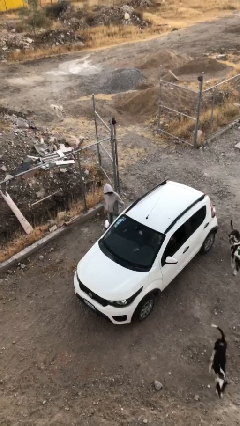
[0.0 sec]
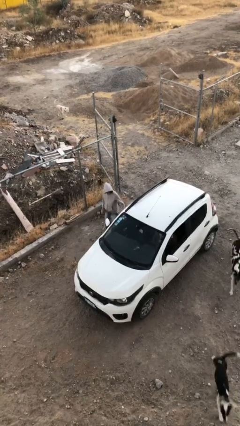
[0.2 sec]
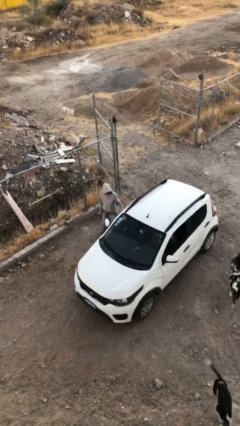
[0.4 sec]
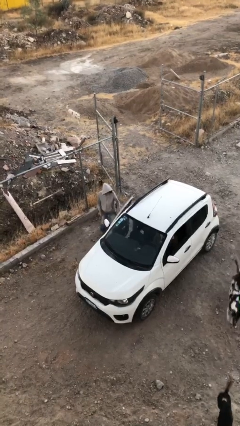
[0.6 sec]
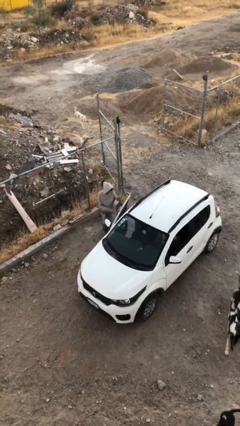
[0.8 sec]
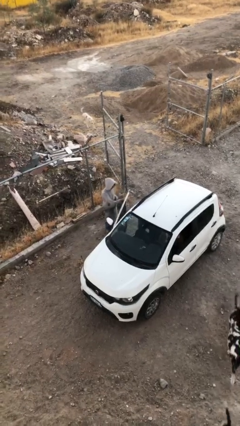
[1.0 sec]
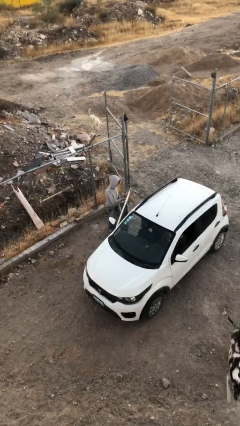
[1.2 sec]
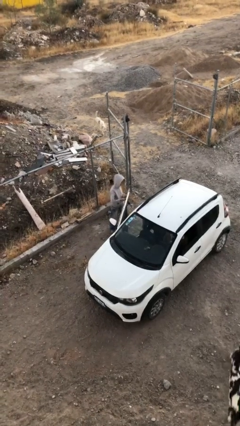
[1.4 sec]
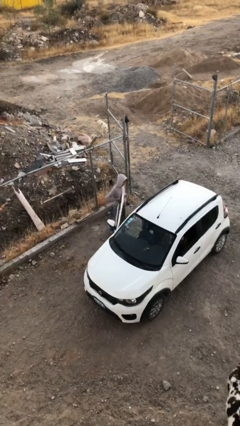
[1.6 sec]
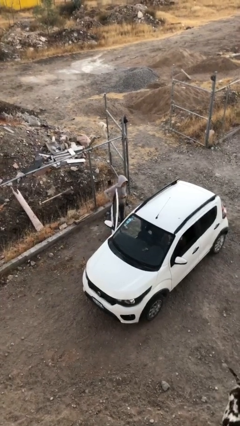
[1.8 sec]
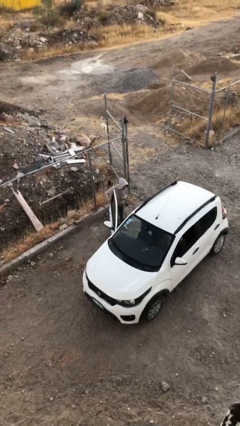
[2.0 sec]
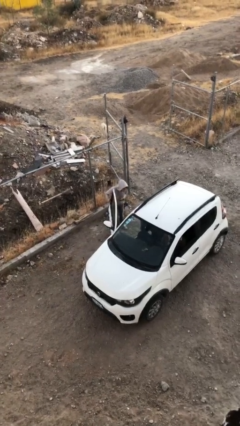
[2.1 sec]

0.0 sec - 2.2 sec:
person opens car door

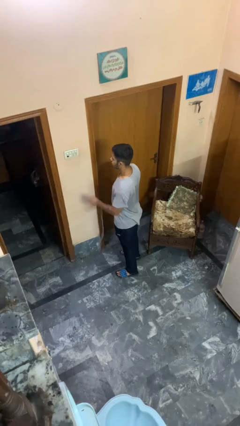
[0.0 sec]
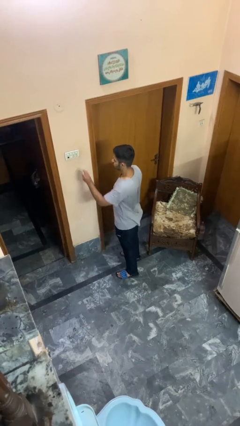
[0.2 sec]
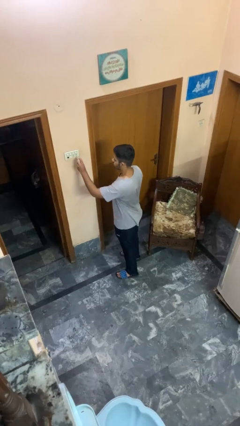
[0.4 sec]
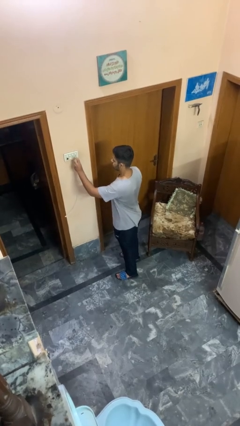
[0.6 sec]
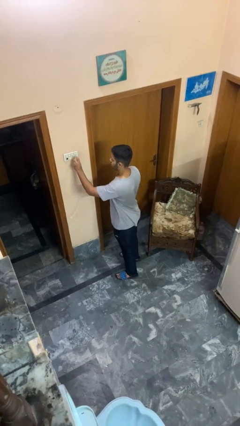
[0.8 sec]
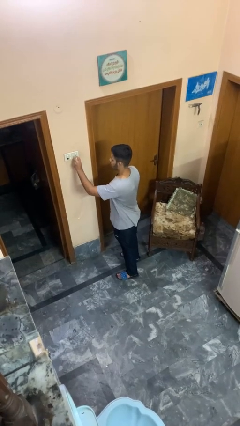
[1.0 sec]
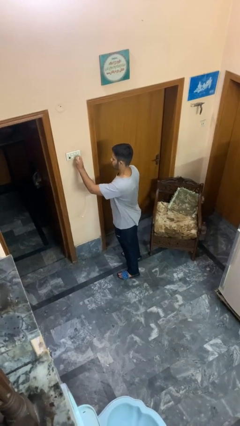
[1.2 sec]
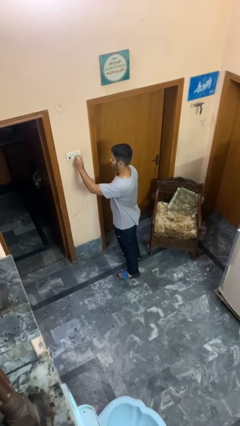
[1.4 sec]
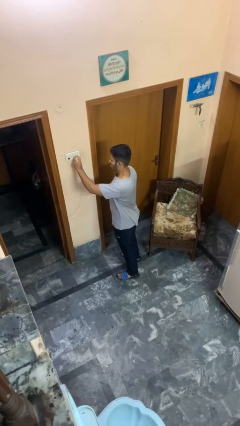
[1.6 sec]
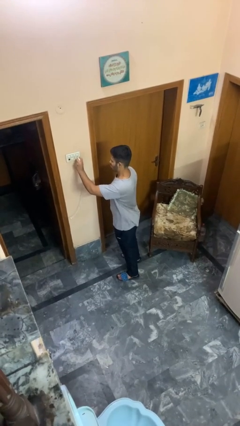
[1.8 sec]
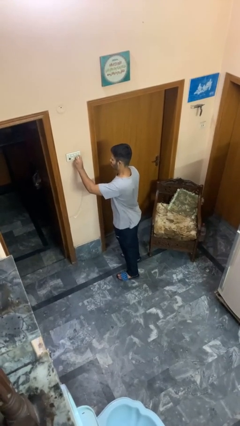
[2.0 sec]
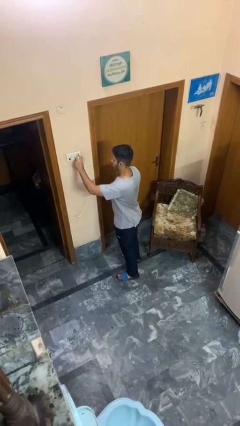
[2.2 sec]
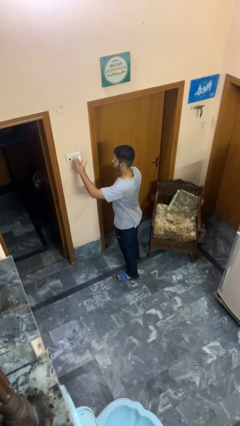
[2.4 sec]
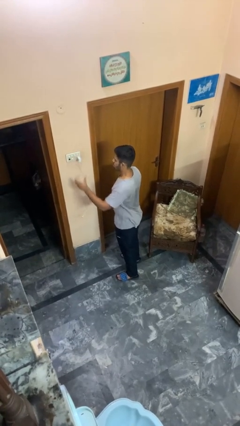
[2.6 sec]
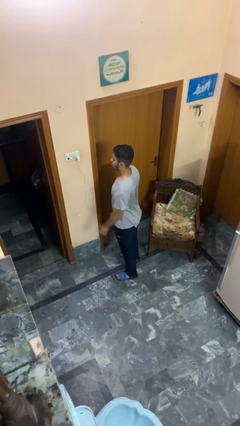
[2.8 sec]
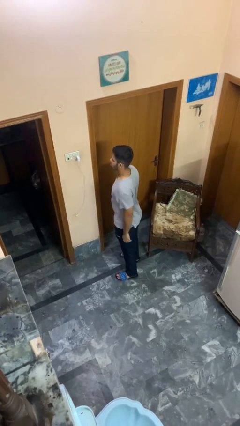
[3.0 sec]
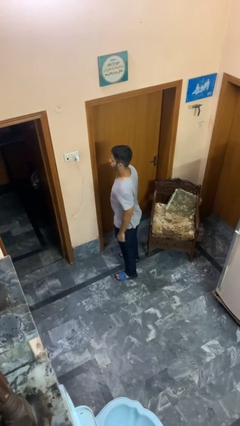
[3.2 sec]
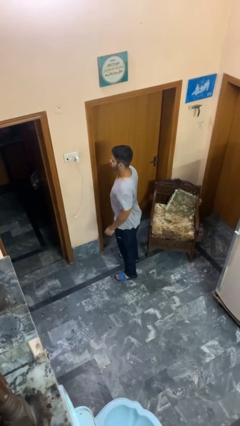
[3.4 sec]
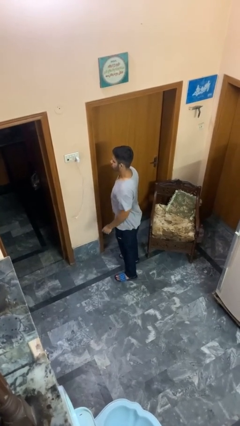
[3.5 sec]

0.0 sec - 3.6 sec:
person plugs into electrical socket

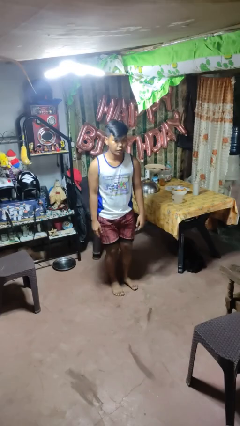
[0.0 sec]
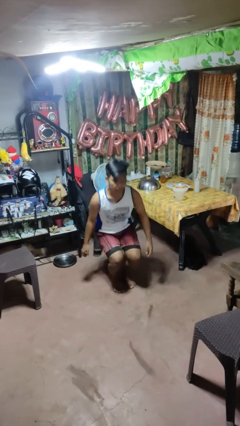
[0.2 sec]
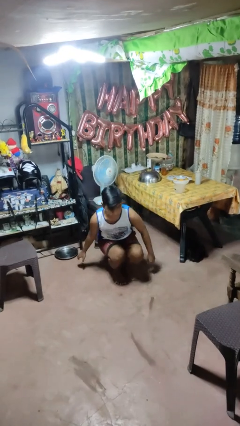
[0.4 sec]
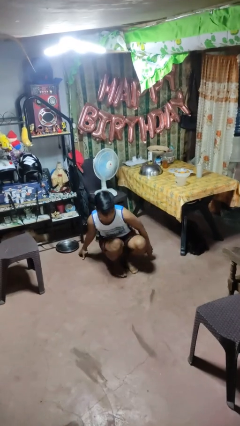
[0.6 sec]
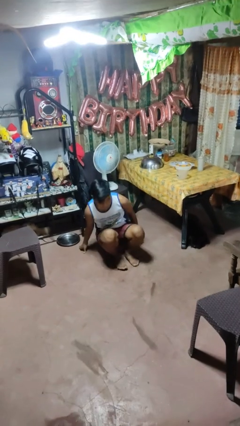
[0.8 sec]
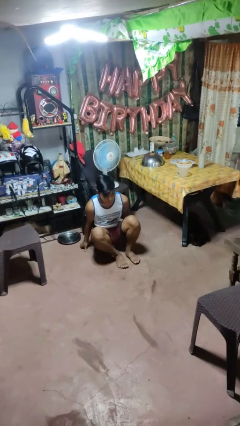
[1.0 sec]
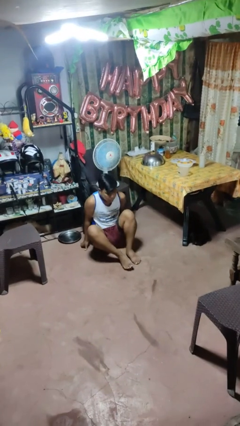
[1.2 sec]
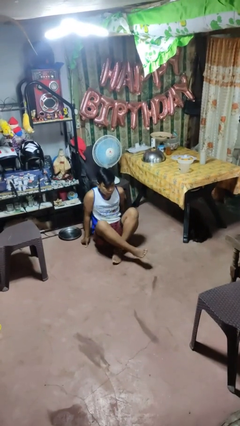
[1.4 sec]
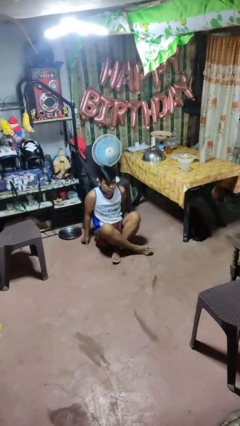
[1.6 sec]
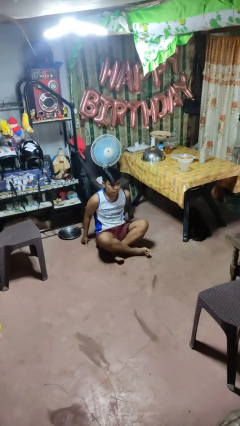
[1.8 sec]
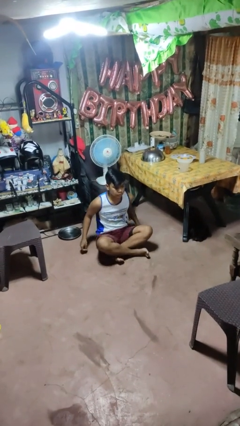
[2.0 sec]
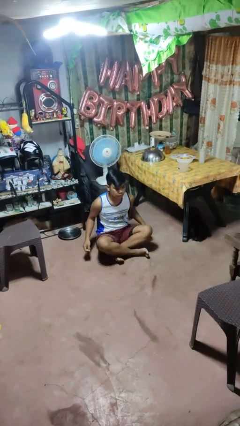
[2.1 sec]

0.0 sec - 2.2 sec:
person sits crisscross

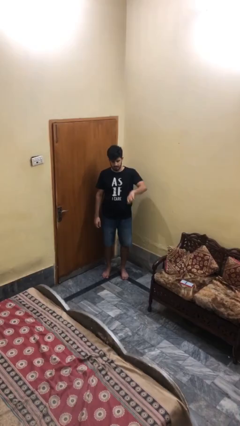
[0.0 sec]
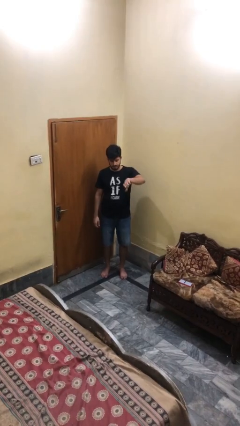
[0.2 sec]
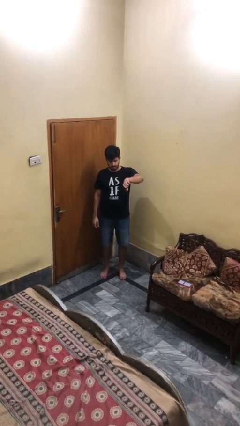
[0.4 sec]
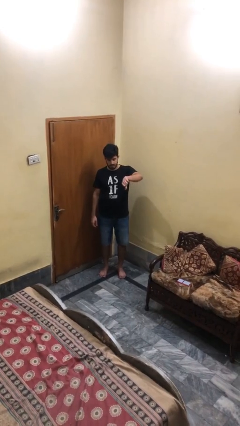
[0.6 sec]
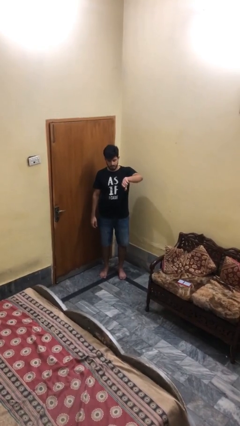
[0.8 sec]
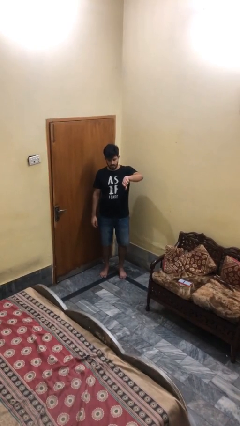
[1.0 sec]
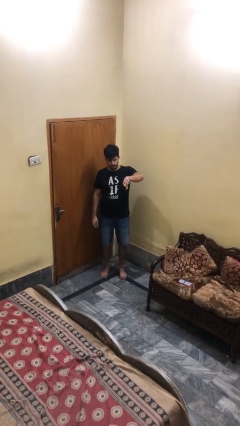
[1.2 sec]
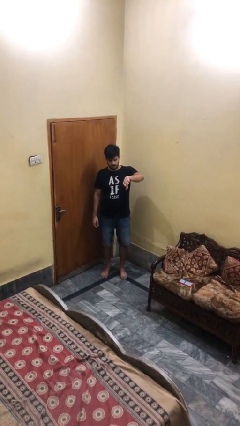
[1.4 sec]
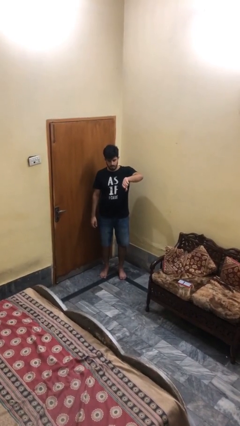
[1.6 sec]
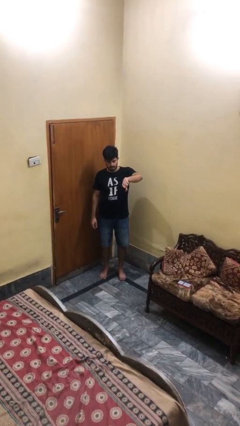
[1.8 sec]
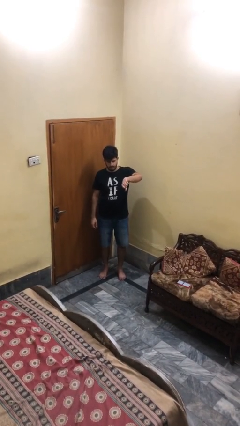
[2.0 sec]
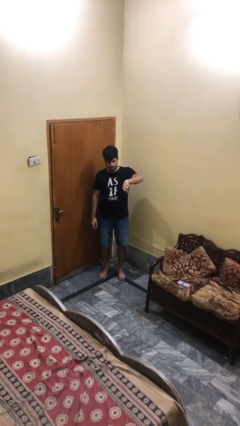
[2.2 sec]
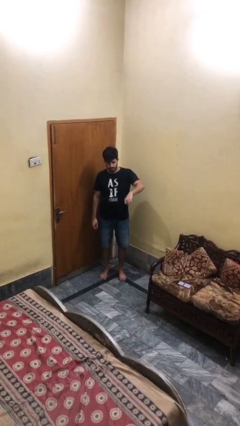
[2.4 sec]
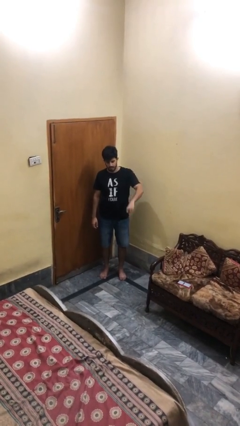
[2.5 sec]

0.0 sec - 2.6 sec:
person gestures thumbs down

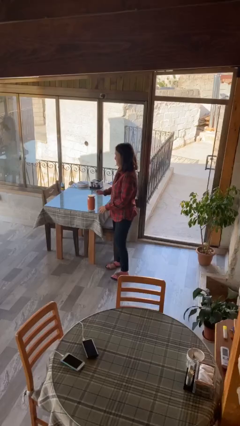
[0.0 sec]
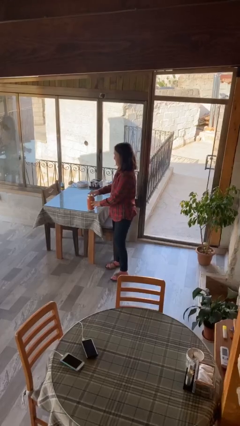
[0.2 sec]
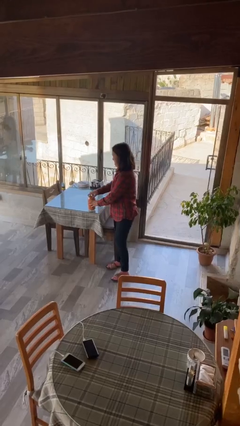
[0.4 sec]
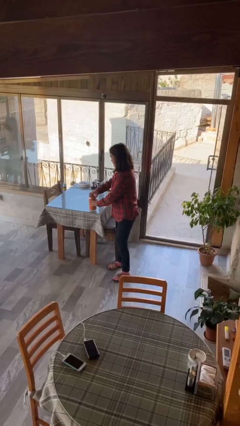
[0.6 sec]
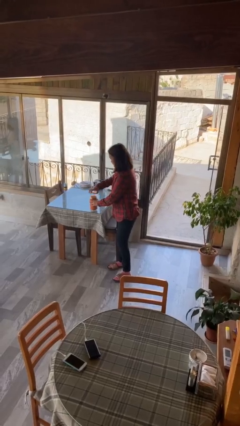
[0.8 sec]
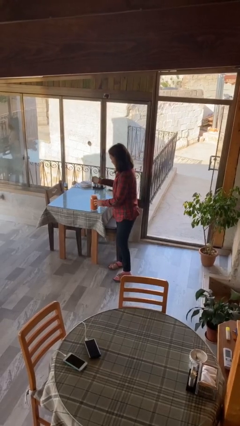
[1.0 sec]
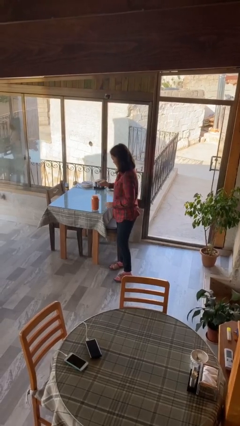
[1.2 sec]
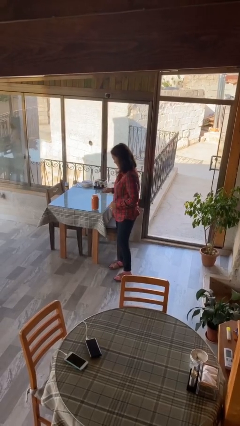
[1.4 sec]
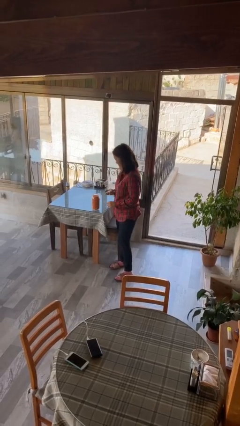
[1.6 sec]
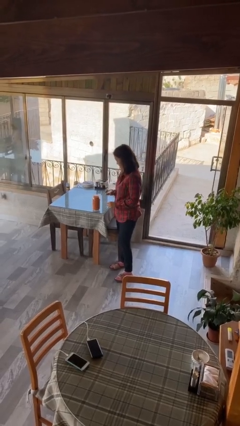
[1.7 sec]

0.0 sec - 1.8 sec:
person opens jar

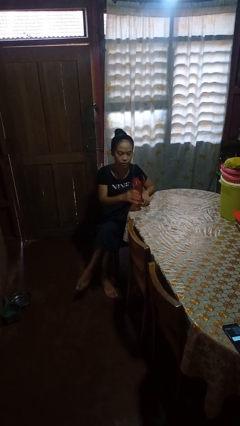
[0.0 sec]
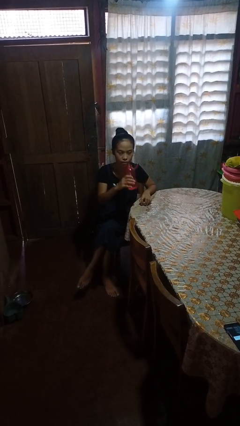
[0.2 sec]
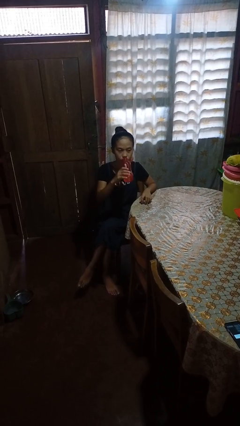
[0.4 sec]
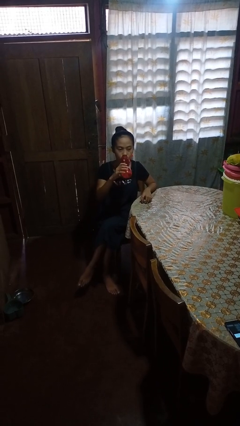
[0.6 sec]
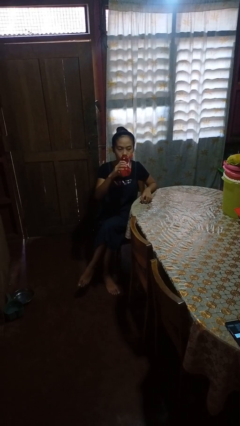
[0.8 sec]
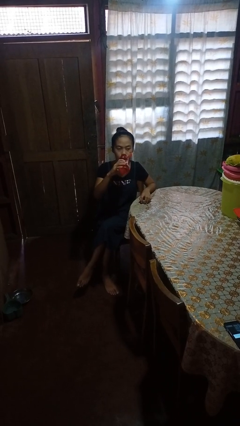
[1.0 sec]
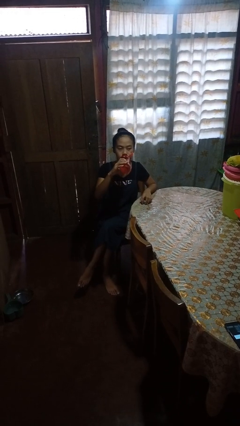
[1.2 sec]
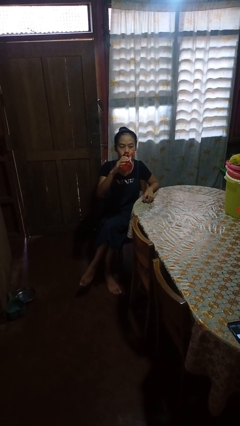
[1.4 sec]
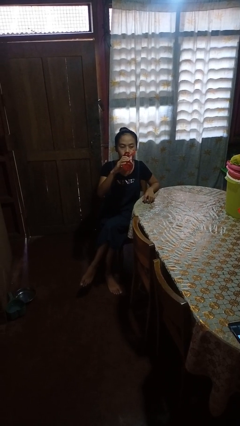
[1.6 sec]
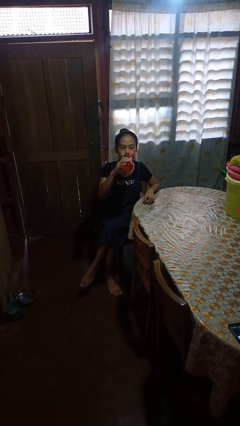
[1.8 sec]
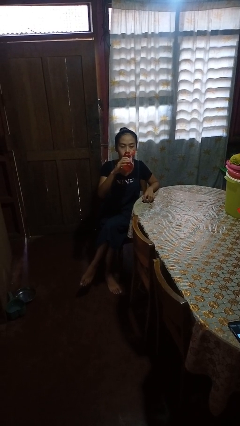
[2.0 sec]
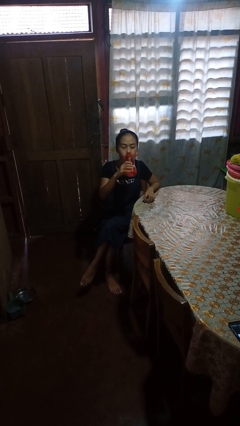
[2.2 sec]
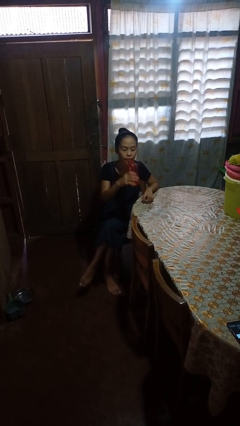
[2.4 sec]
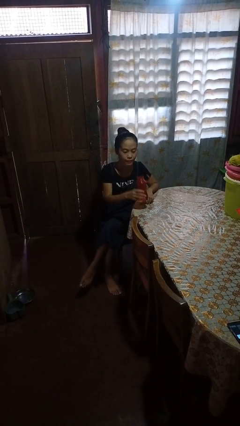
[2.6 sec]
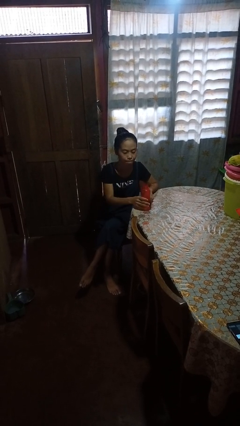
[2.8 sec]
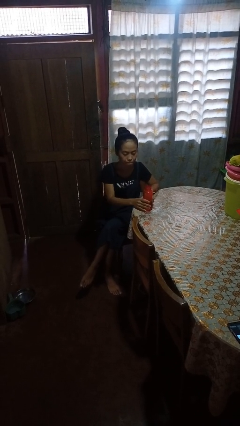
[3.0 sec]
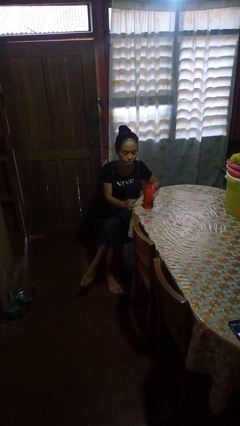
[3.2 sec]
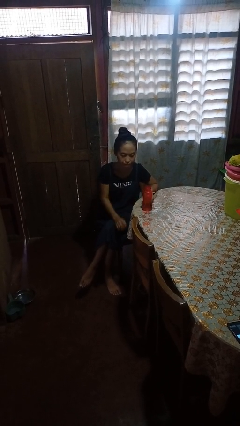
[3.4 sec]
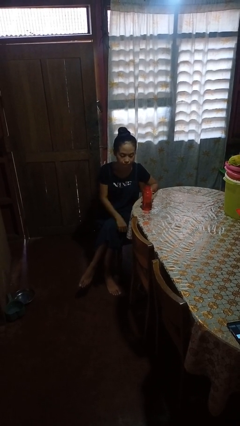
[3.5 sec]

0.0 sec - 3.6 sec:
person drinks from bottle

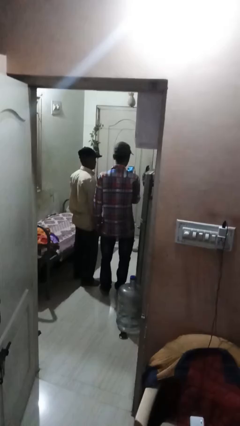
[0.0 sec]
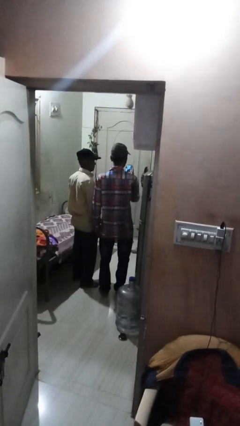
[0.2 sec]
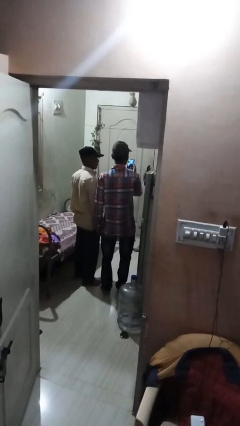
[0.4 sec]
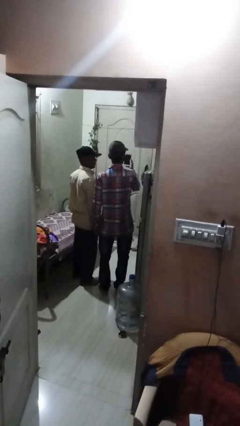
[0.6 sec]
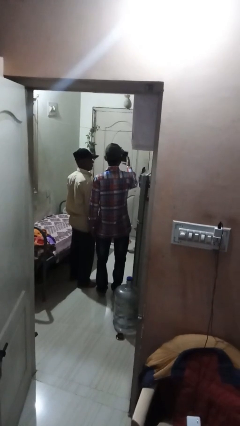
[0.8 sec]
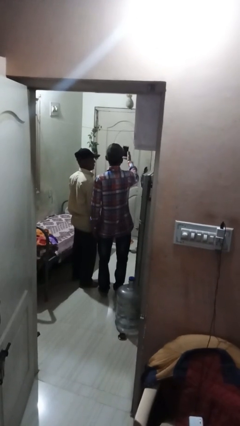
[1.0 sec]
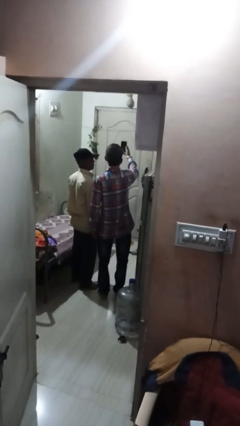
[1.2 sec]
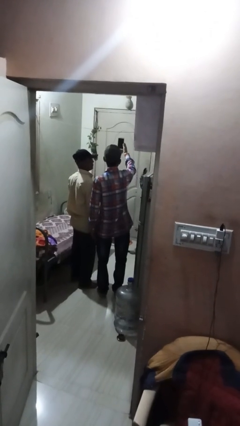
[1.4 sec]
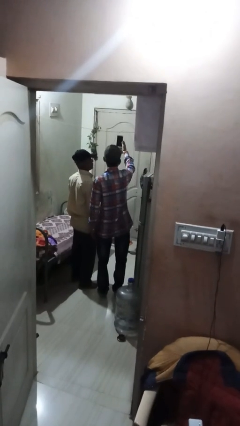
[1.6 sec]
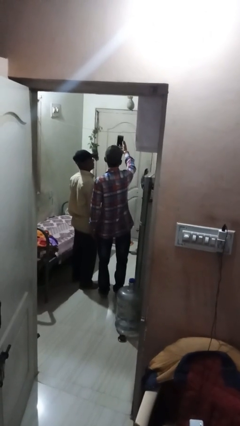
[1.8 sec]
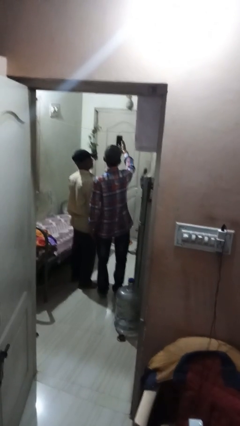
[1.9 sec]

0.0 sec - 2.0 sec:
person takes selfie with person
